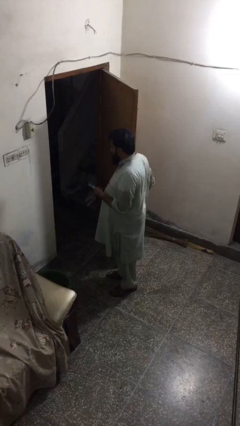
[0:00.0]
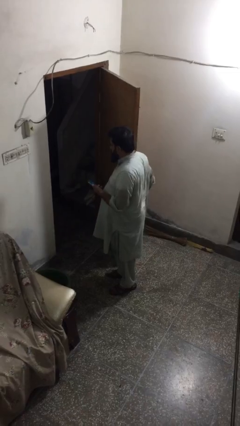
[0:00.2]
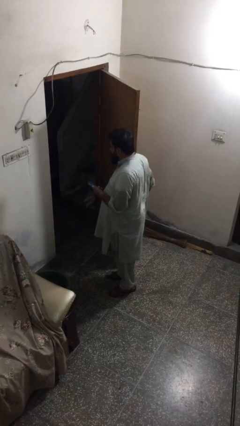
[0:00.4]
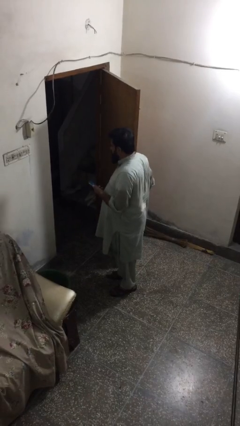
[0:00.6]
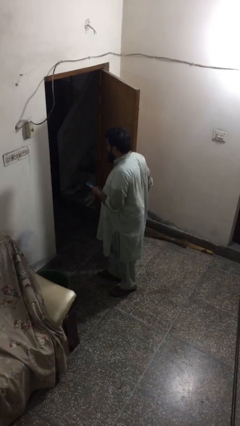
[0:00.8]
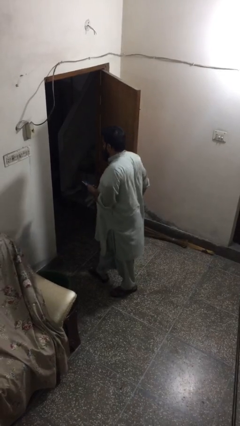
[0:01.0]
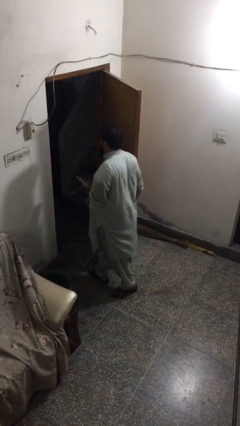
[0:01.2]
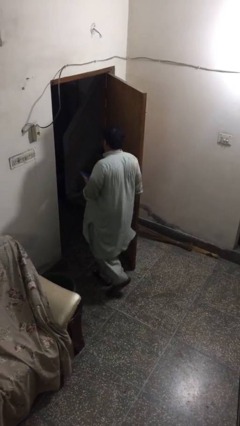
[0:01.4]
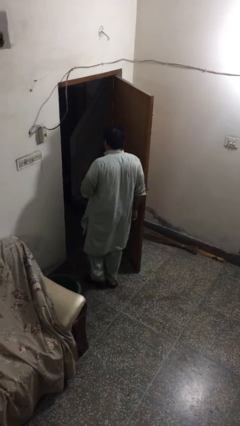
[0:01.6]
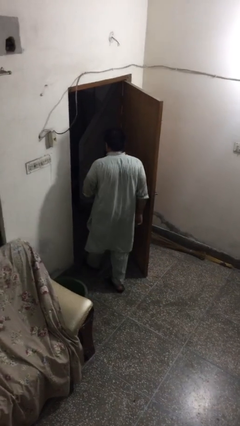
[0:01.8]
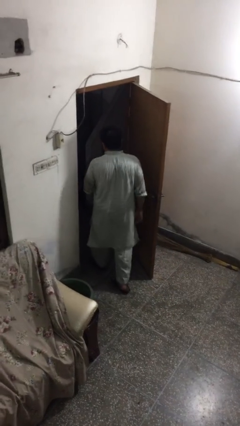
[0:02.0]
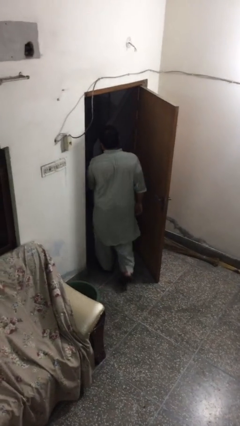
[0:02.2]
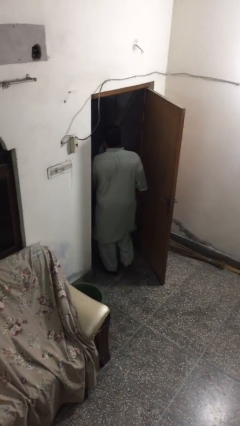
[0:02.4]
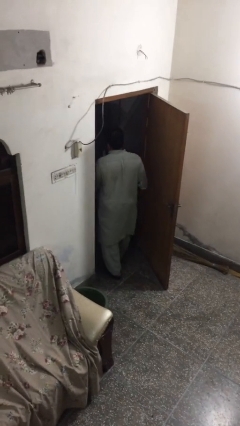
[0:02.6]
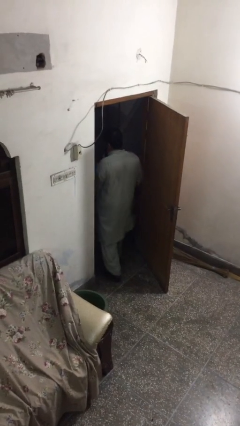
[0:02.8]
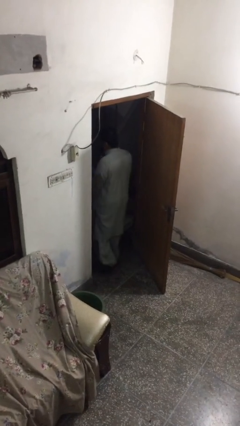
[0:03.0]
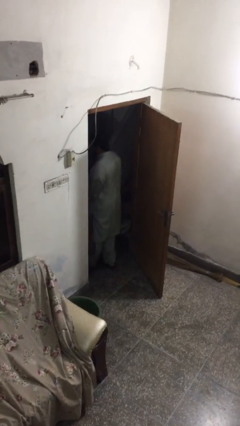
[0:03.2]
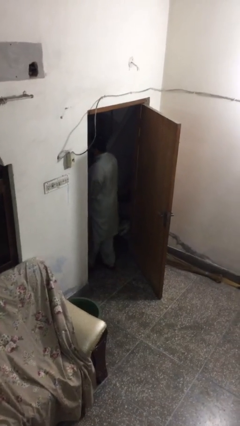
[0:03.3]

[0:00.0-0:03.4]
person exits scene through structure

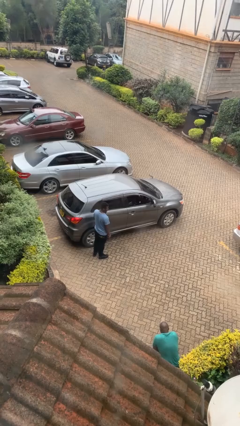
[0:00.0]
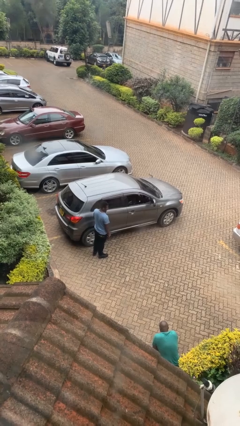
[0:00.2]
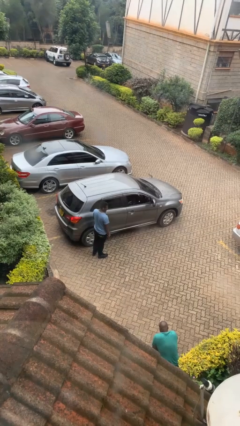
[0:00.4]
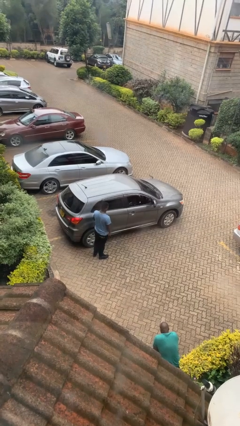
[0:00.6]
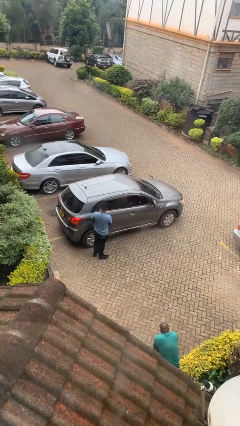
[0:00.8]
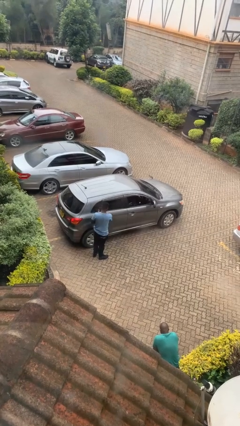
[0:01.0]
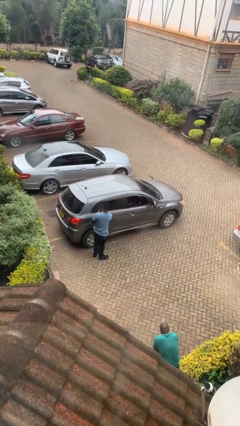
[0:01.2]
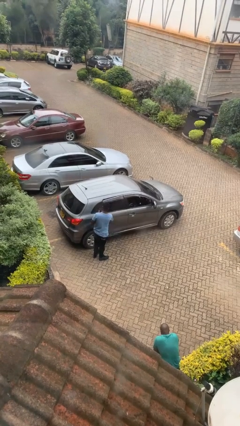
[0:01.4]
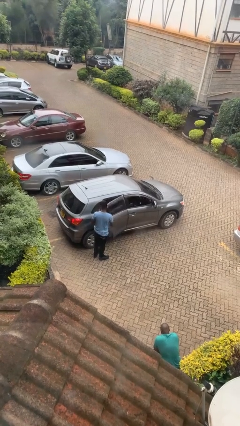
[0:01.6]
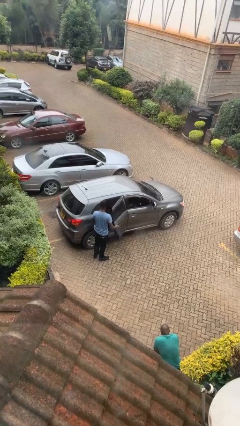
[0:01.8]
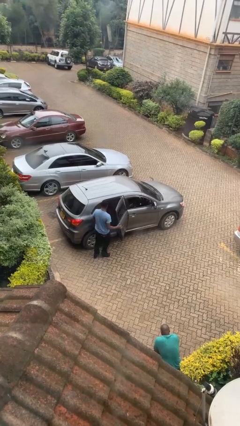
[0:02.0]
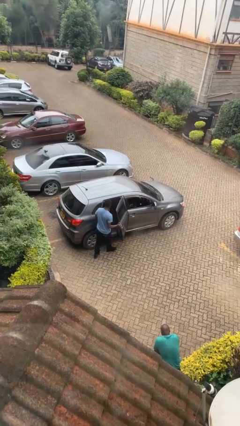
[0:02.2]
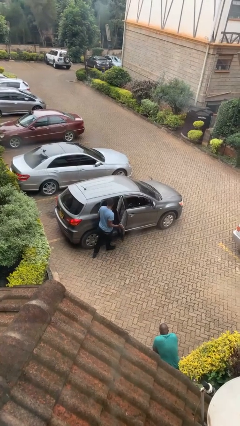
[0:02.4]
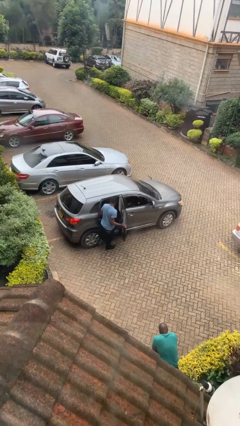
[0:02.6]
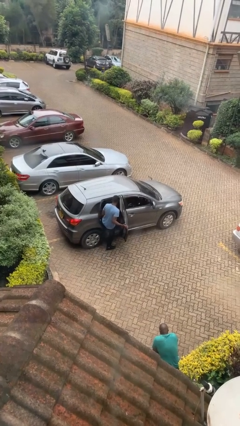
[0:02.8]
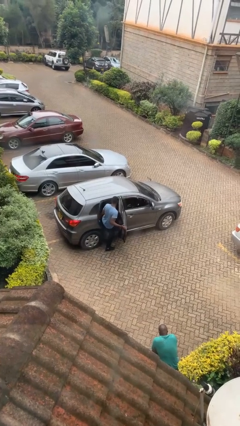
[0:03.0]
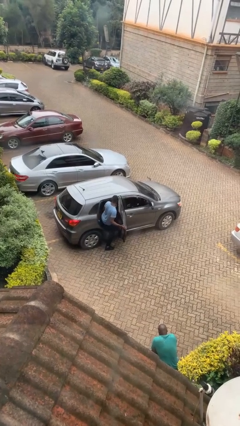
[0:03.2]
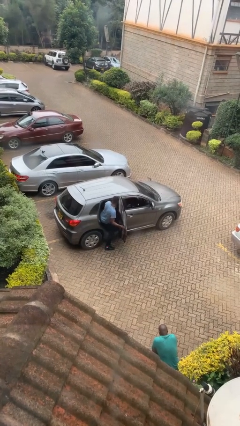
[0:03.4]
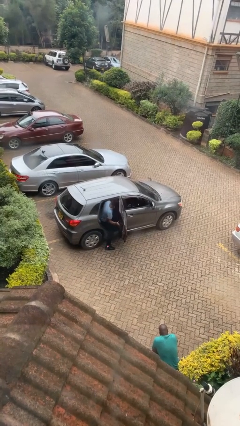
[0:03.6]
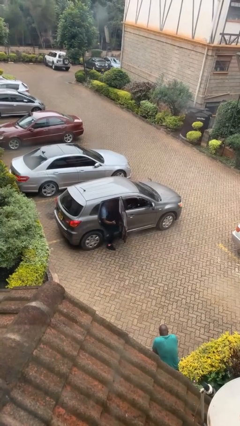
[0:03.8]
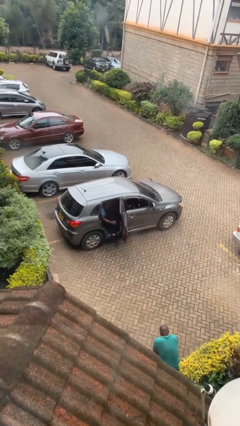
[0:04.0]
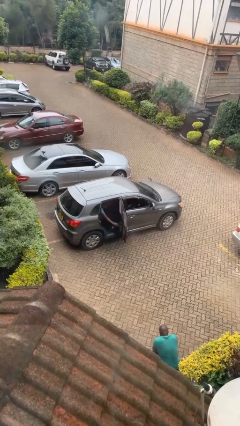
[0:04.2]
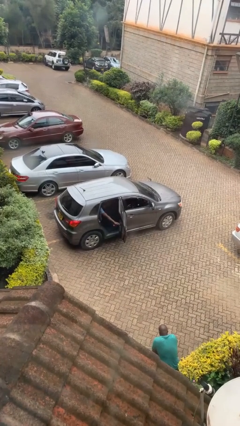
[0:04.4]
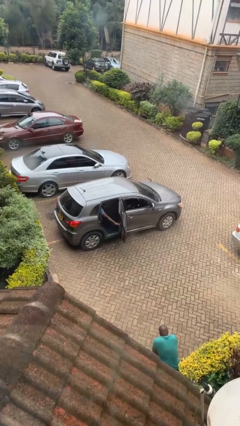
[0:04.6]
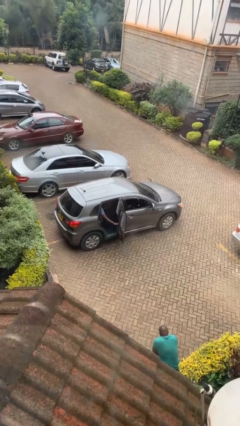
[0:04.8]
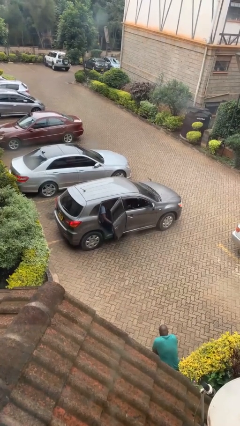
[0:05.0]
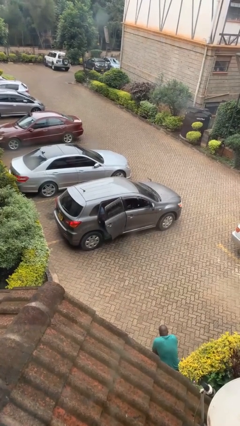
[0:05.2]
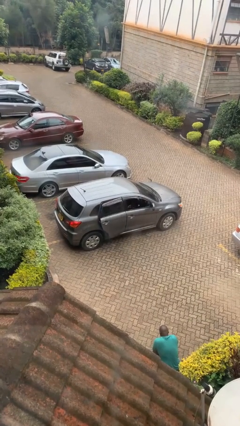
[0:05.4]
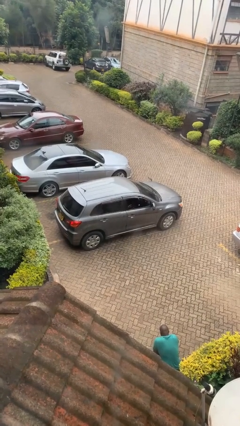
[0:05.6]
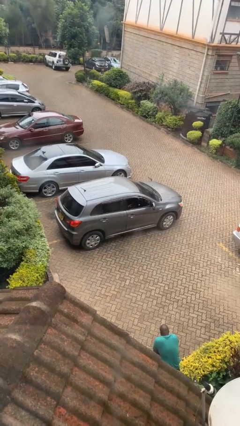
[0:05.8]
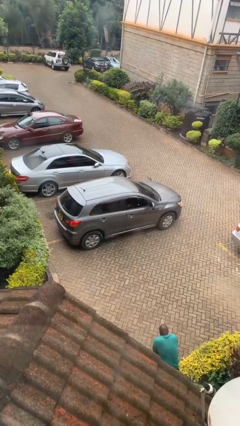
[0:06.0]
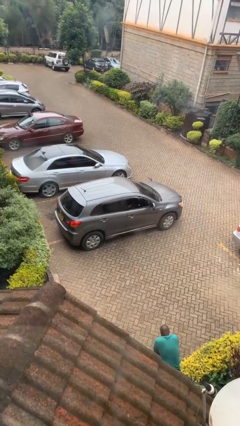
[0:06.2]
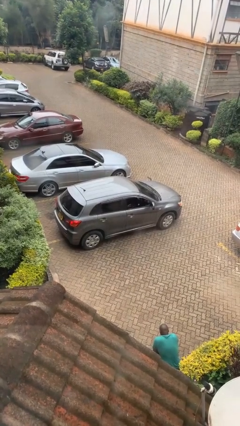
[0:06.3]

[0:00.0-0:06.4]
car picks up person

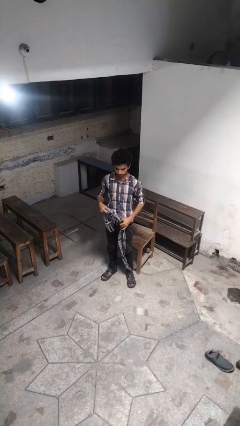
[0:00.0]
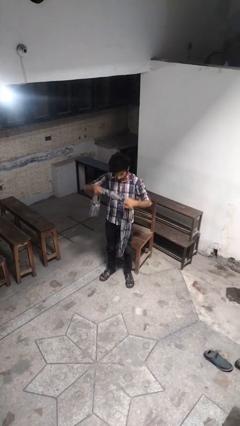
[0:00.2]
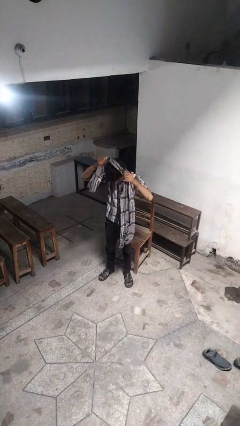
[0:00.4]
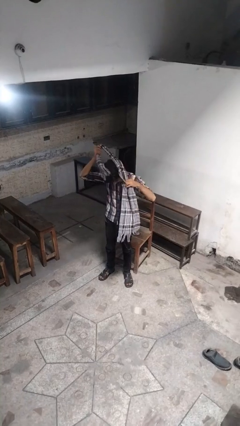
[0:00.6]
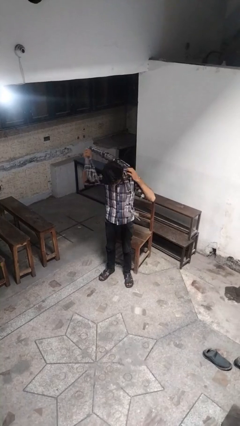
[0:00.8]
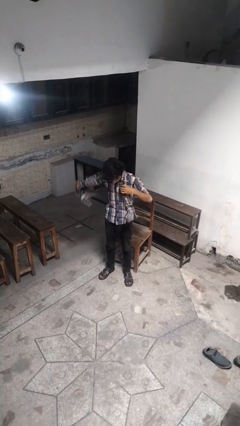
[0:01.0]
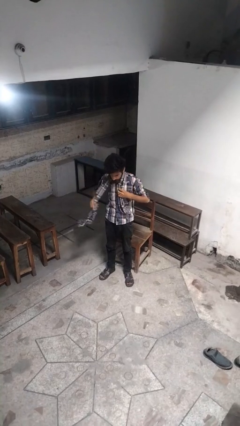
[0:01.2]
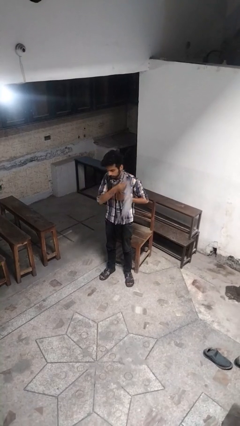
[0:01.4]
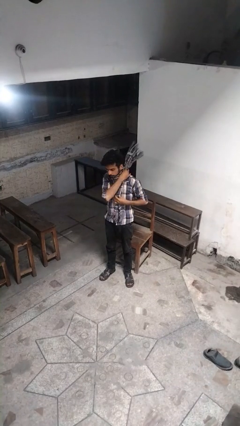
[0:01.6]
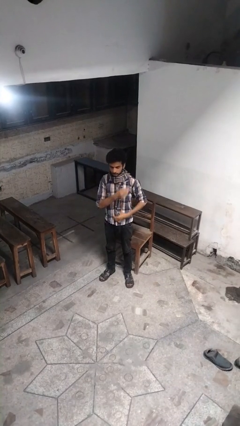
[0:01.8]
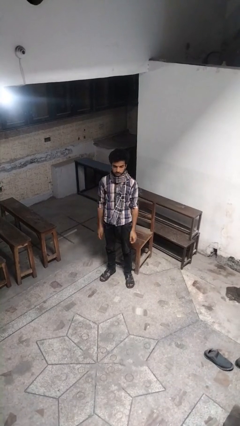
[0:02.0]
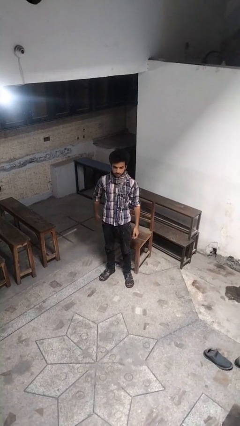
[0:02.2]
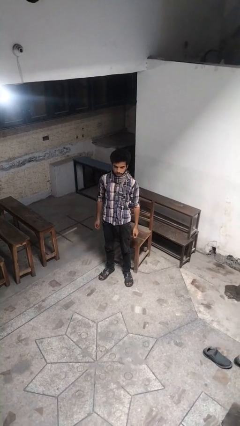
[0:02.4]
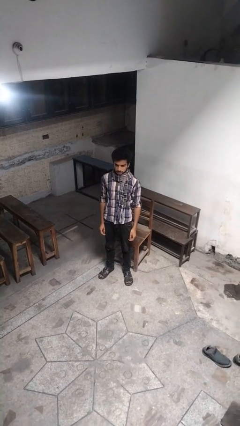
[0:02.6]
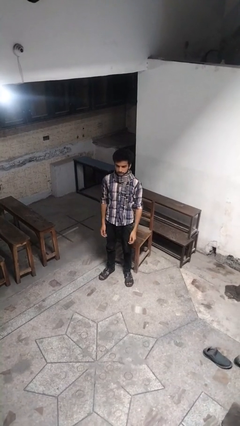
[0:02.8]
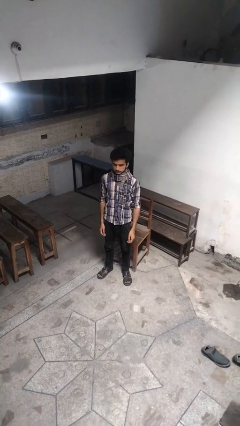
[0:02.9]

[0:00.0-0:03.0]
person puts on scarf

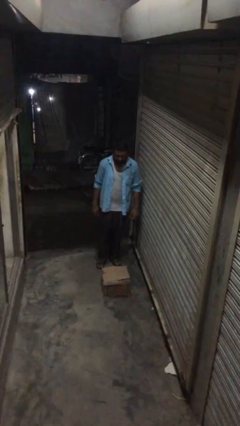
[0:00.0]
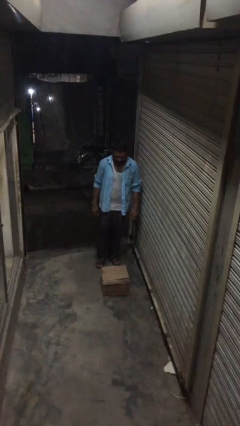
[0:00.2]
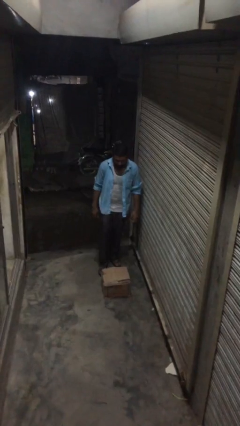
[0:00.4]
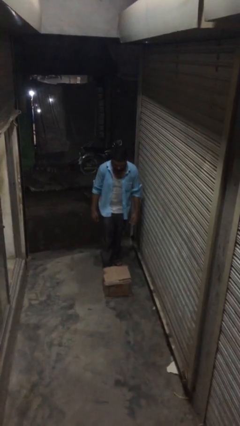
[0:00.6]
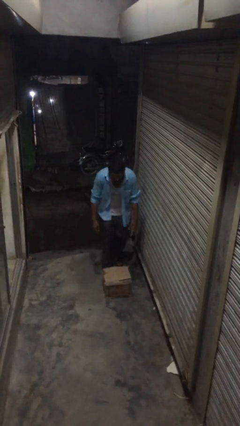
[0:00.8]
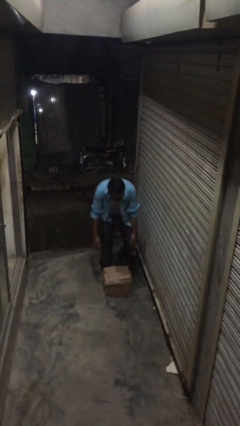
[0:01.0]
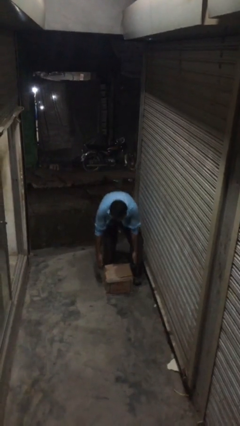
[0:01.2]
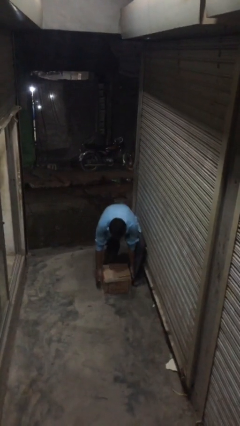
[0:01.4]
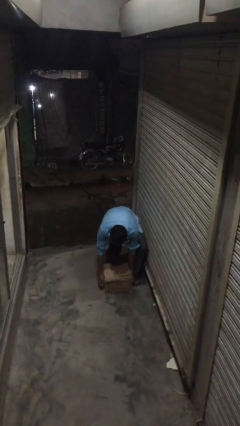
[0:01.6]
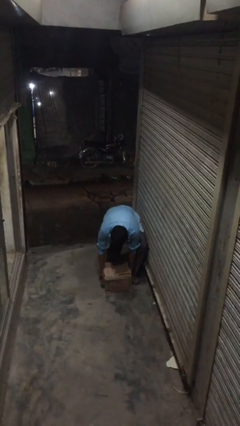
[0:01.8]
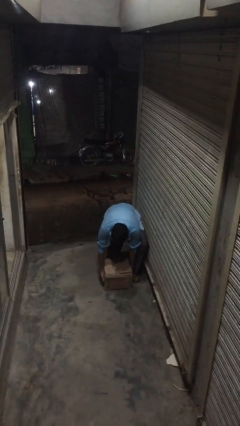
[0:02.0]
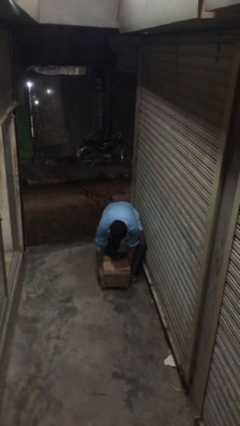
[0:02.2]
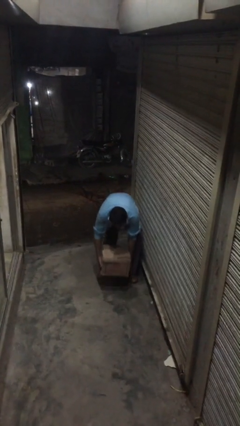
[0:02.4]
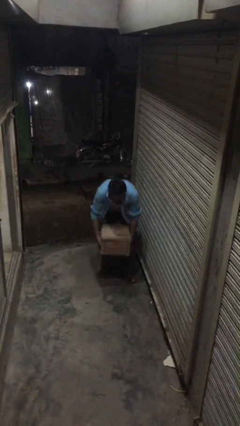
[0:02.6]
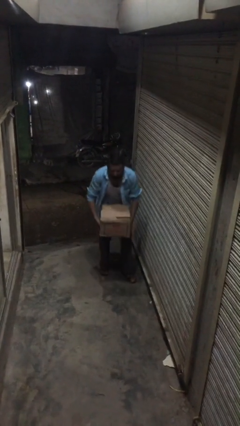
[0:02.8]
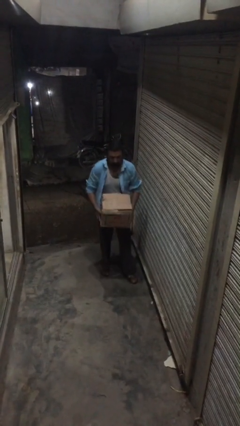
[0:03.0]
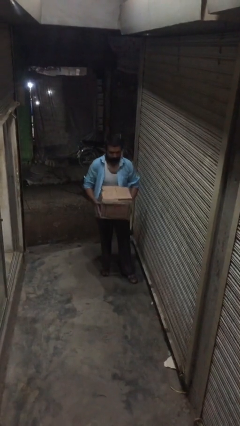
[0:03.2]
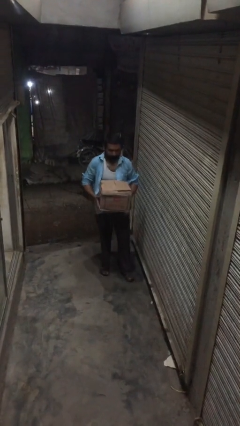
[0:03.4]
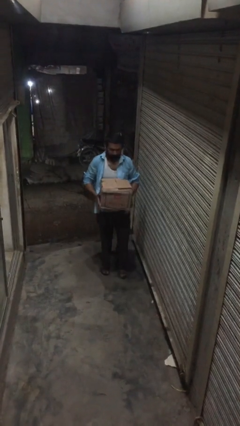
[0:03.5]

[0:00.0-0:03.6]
person picks up object from floor

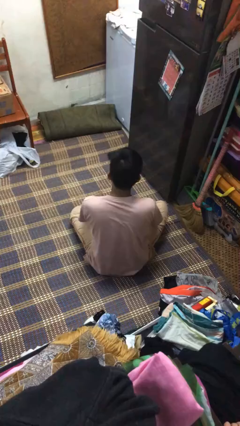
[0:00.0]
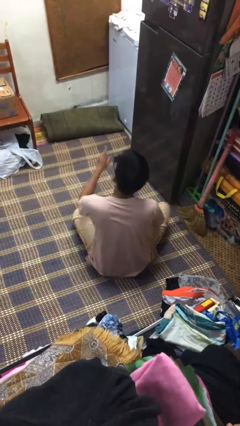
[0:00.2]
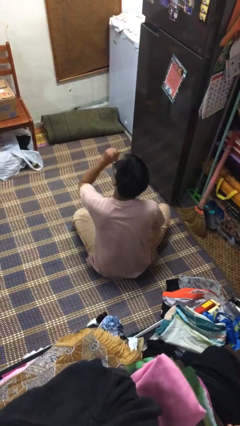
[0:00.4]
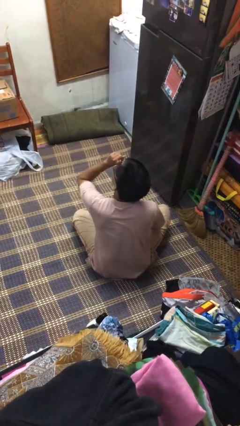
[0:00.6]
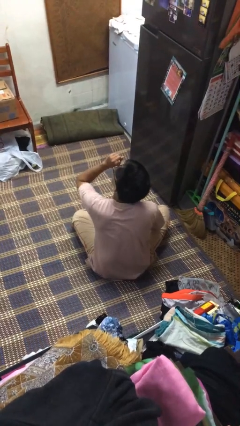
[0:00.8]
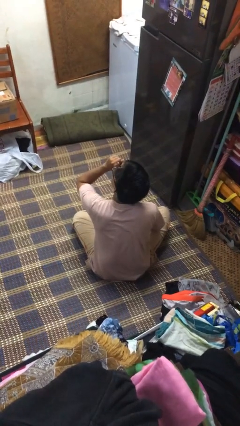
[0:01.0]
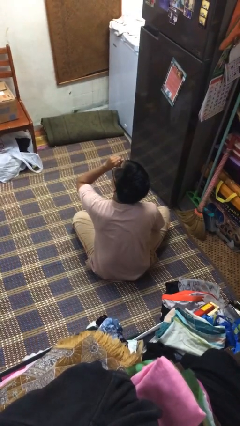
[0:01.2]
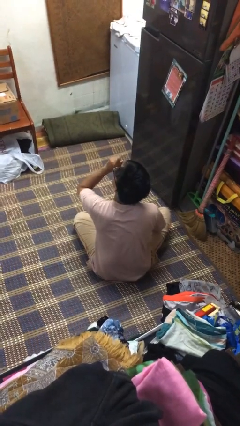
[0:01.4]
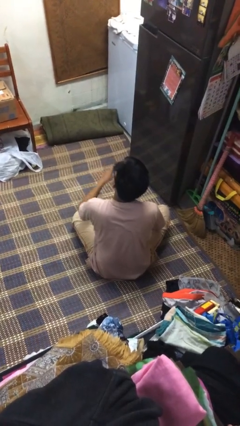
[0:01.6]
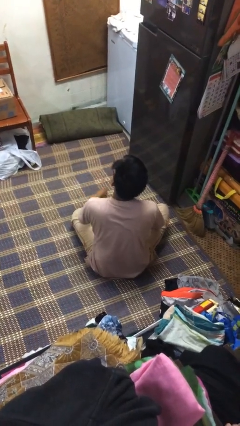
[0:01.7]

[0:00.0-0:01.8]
person gestures be quiet
